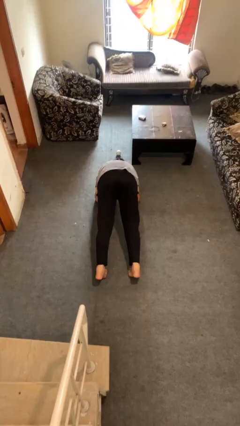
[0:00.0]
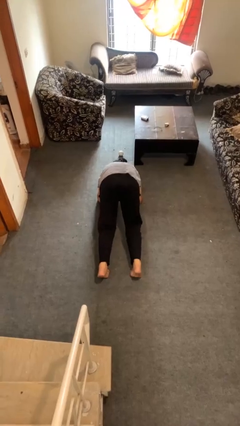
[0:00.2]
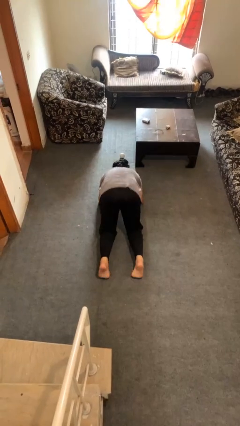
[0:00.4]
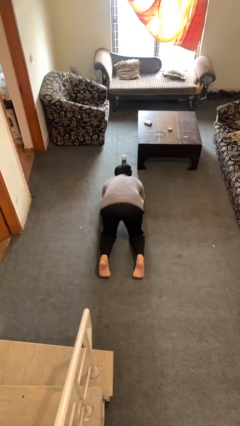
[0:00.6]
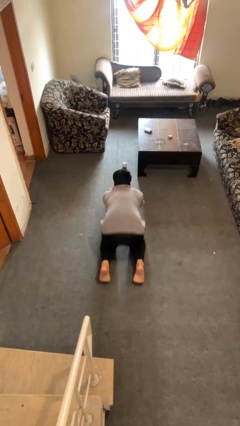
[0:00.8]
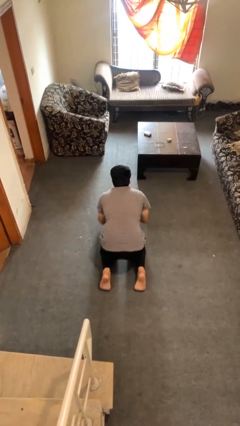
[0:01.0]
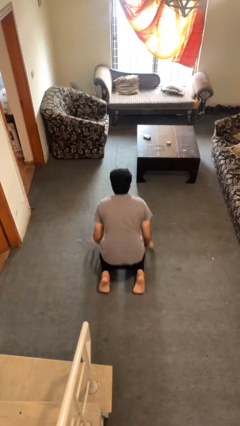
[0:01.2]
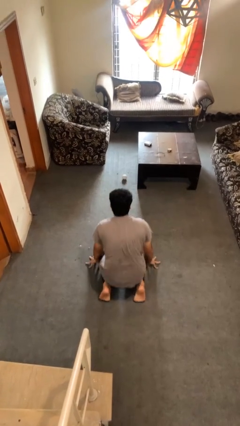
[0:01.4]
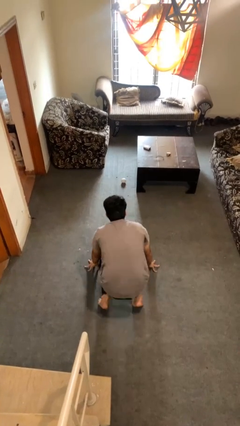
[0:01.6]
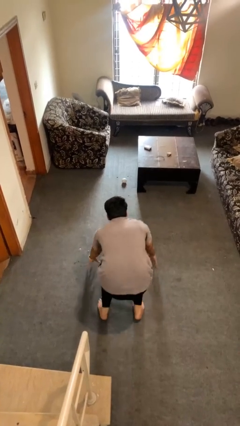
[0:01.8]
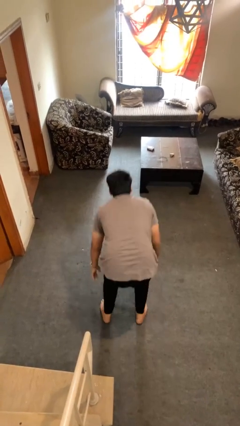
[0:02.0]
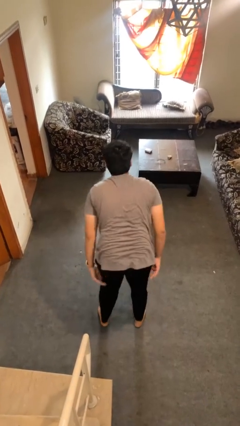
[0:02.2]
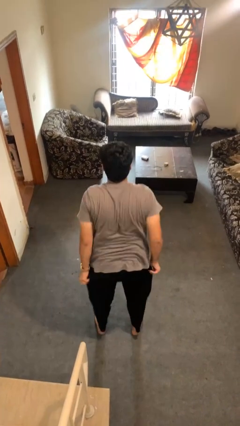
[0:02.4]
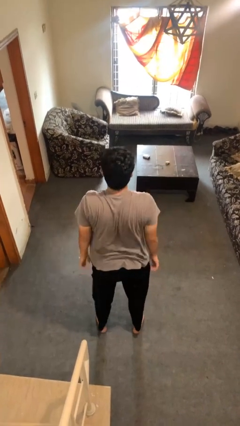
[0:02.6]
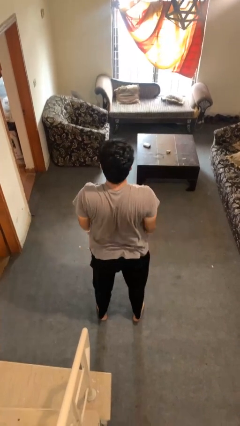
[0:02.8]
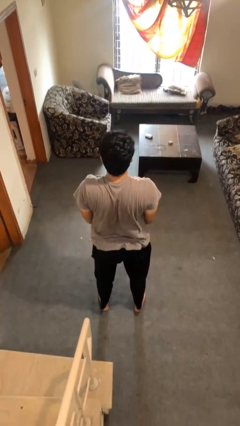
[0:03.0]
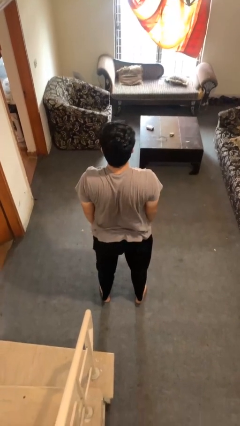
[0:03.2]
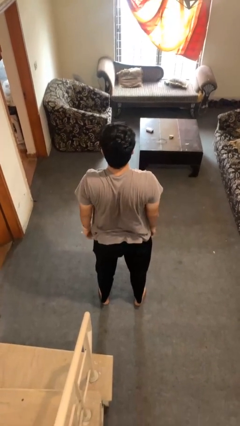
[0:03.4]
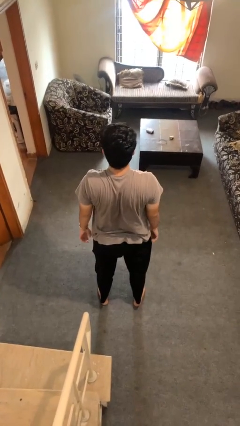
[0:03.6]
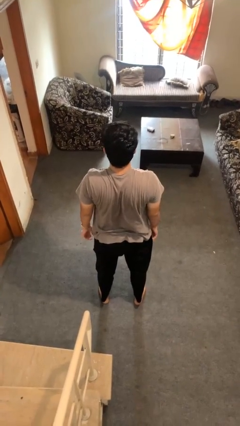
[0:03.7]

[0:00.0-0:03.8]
person stands up from floor

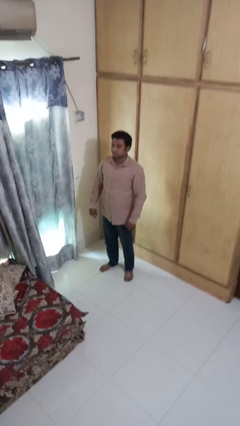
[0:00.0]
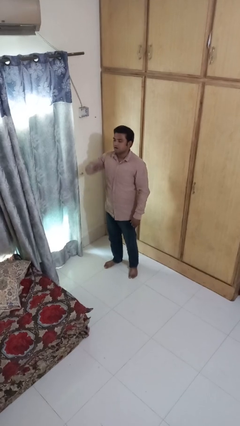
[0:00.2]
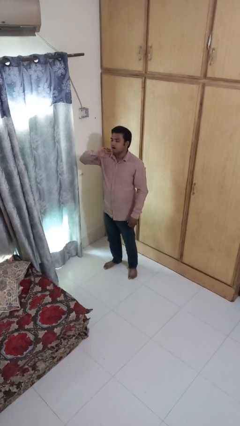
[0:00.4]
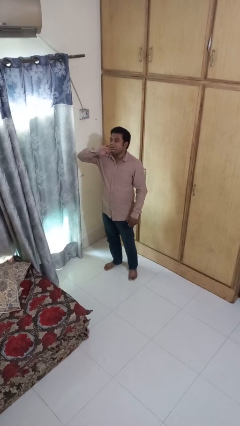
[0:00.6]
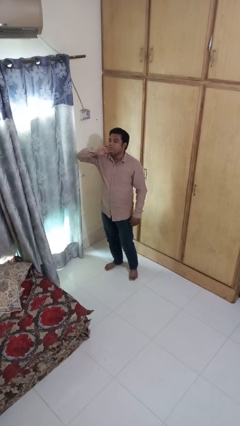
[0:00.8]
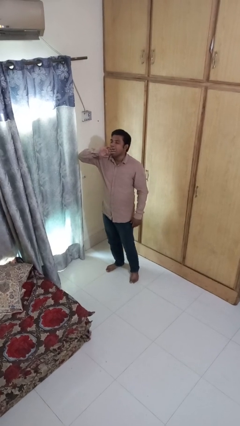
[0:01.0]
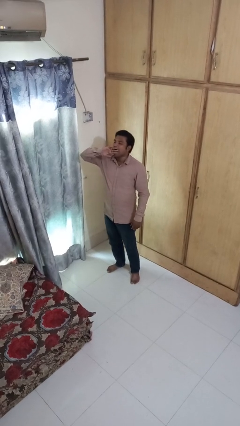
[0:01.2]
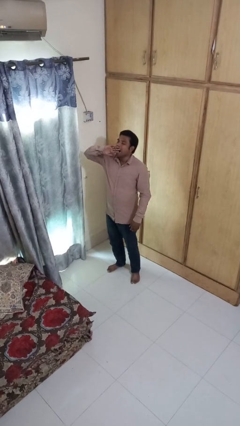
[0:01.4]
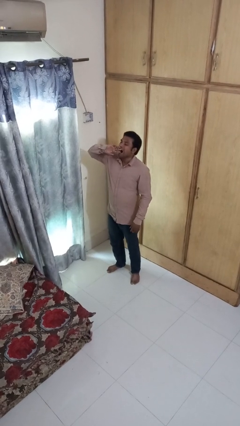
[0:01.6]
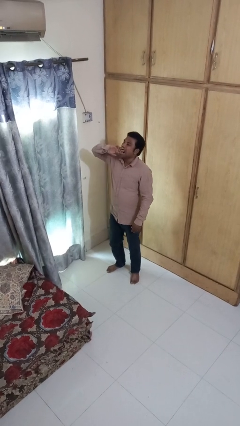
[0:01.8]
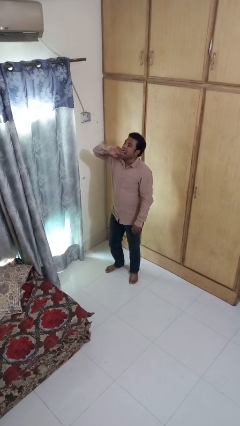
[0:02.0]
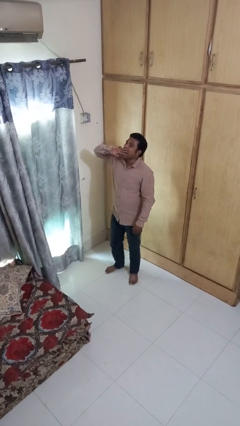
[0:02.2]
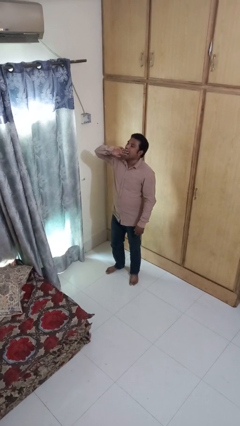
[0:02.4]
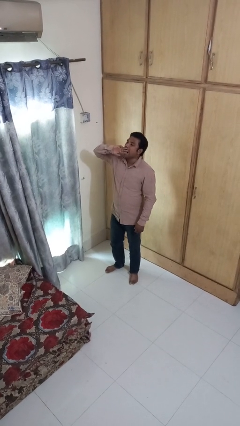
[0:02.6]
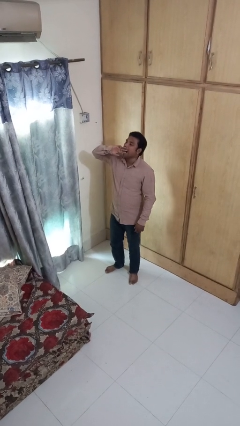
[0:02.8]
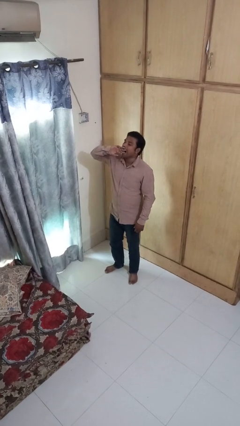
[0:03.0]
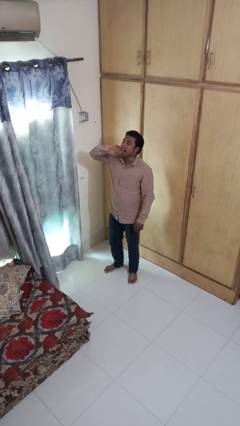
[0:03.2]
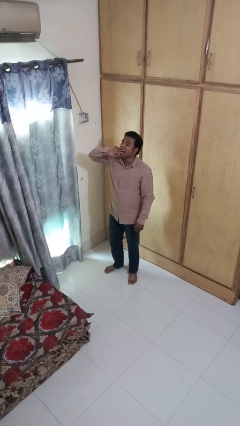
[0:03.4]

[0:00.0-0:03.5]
person yawns

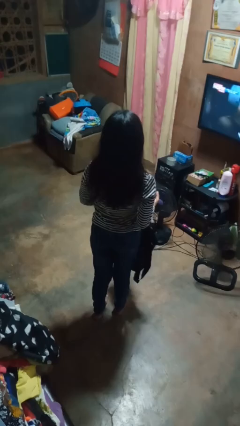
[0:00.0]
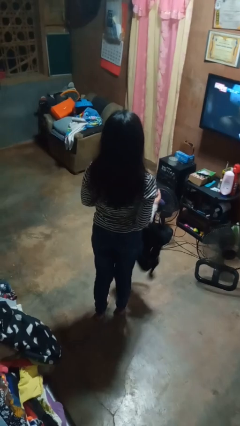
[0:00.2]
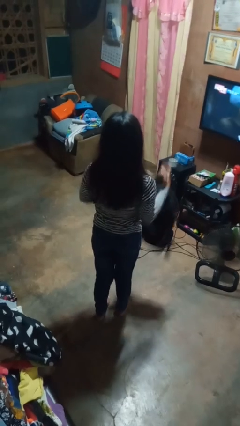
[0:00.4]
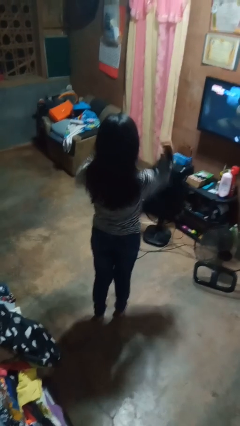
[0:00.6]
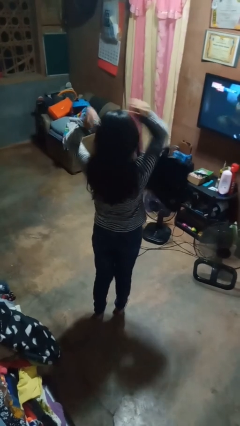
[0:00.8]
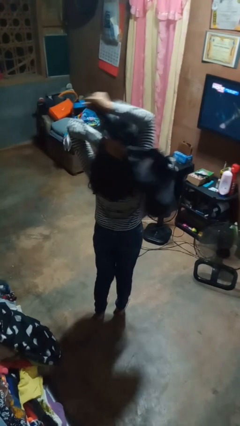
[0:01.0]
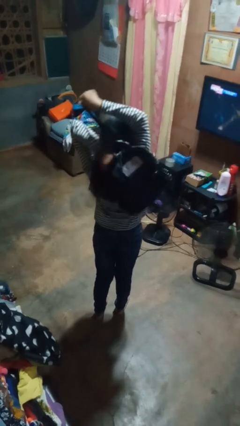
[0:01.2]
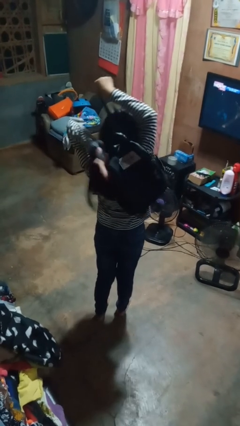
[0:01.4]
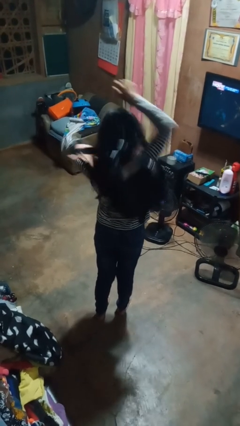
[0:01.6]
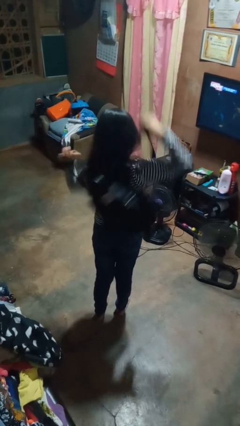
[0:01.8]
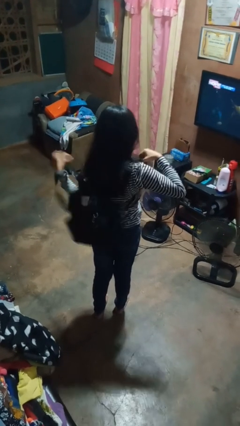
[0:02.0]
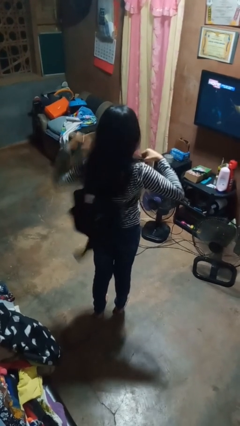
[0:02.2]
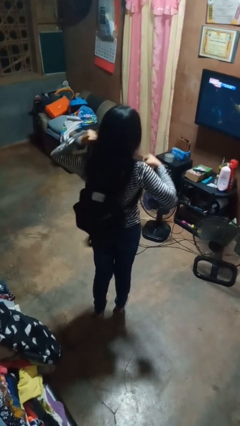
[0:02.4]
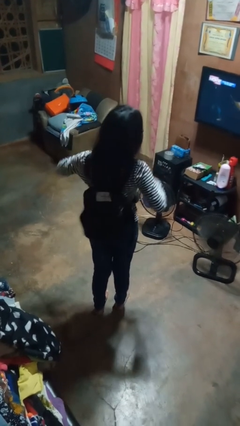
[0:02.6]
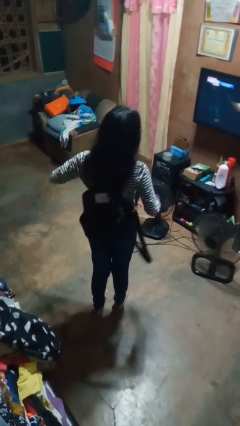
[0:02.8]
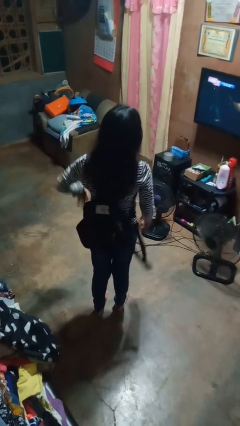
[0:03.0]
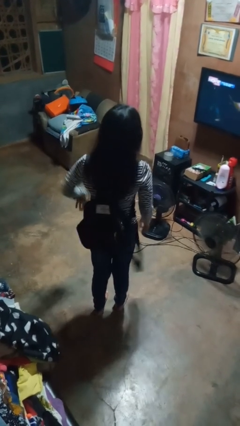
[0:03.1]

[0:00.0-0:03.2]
person puts on backpack

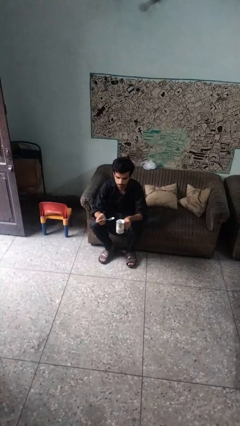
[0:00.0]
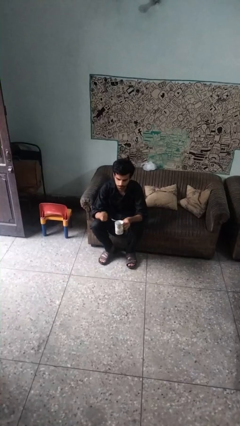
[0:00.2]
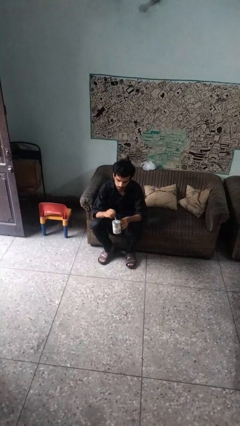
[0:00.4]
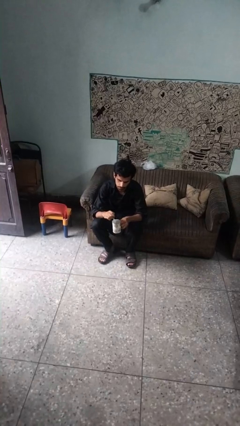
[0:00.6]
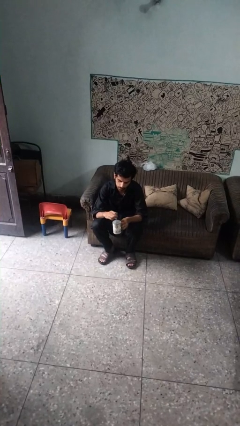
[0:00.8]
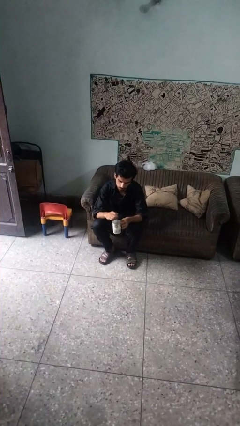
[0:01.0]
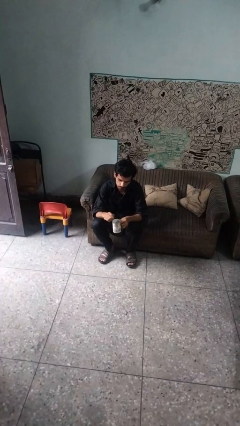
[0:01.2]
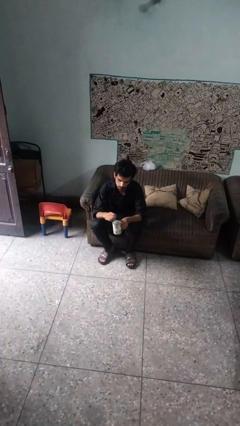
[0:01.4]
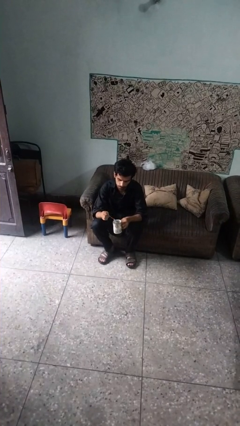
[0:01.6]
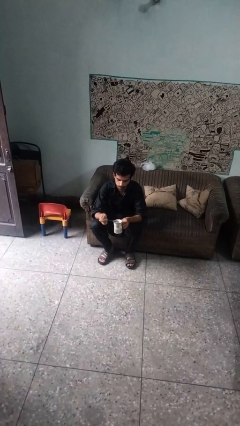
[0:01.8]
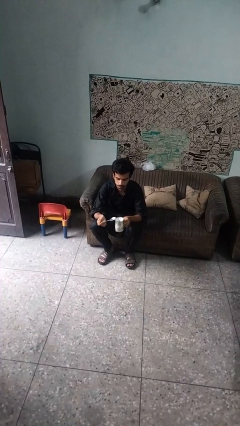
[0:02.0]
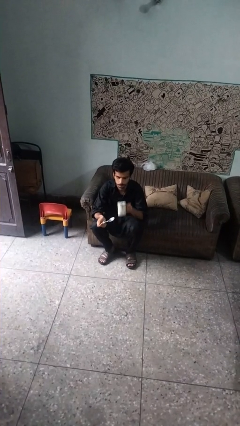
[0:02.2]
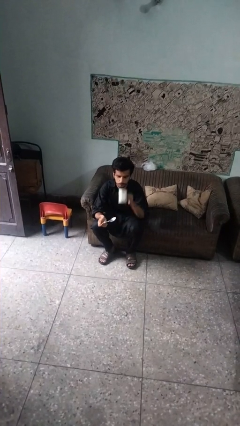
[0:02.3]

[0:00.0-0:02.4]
person stirs mug

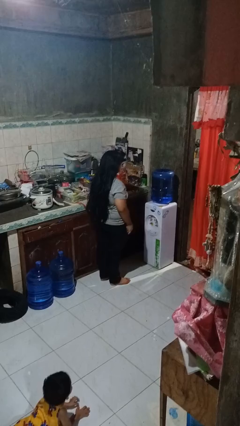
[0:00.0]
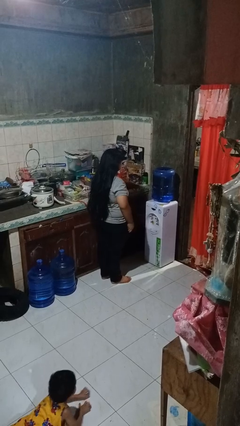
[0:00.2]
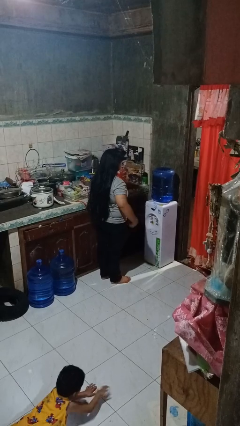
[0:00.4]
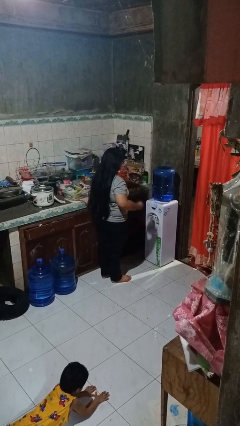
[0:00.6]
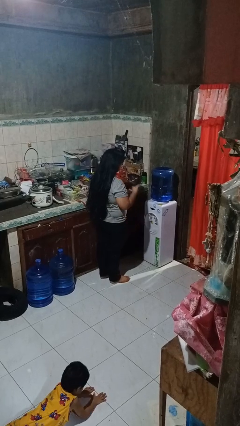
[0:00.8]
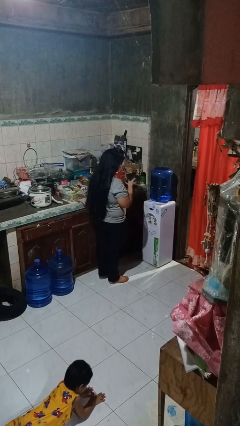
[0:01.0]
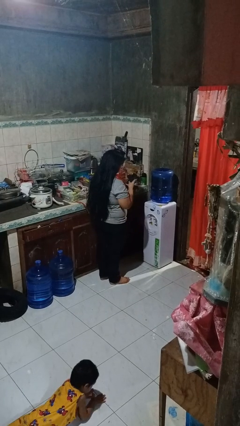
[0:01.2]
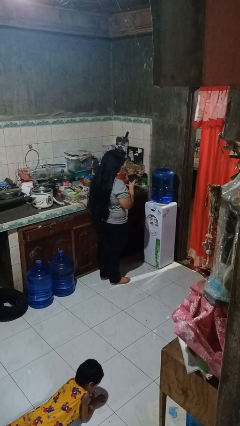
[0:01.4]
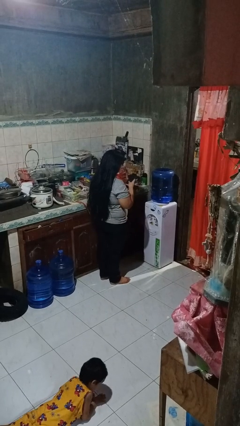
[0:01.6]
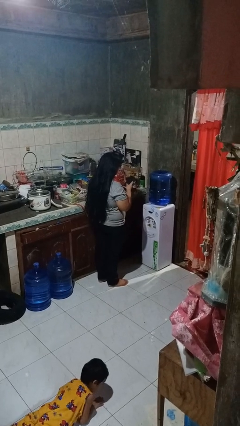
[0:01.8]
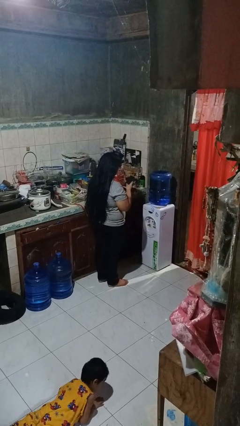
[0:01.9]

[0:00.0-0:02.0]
person takes phone from pocket

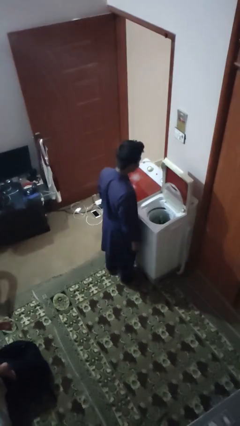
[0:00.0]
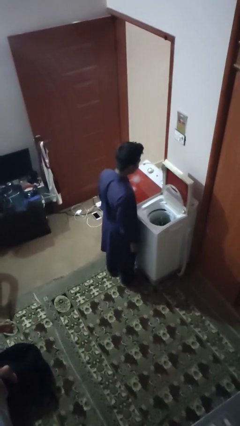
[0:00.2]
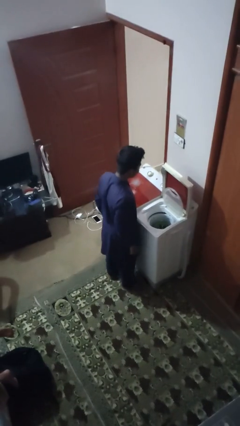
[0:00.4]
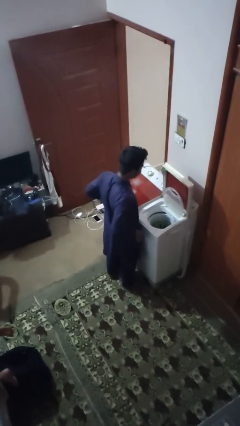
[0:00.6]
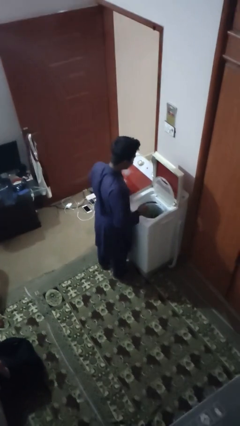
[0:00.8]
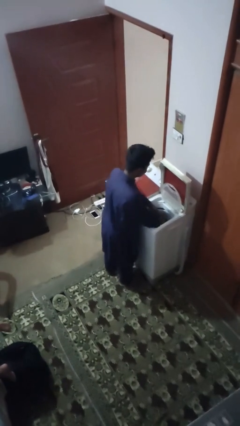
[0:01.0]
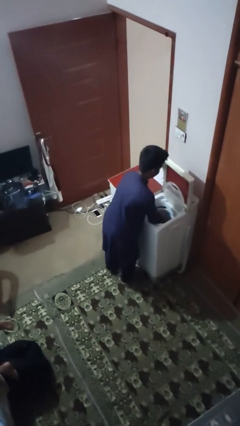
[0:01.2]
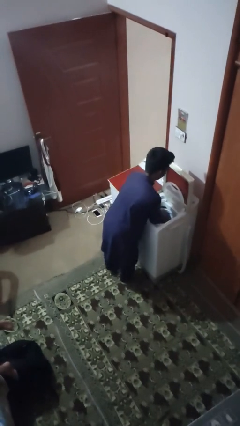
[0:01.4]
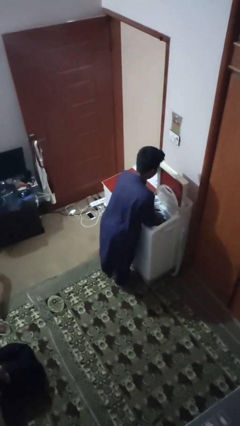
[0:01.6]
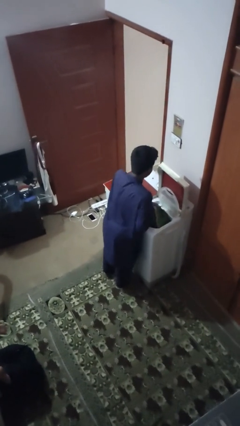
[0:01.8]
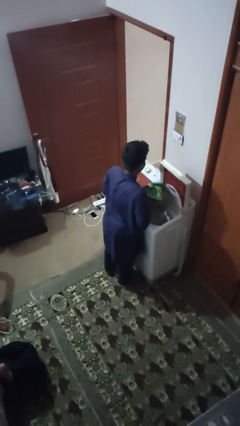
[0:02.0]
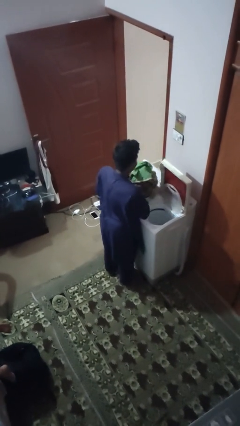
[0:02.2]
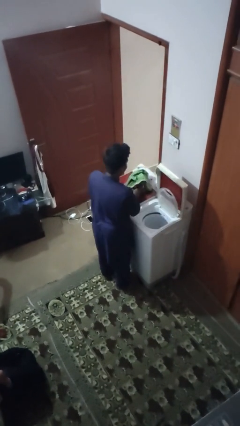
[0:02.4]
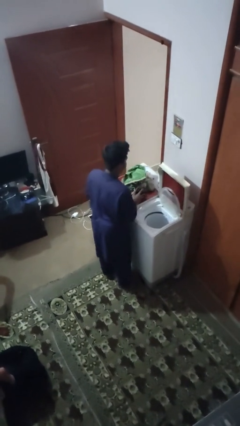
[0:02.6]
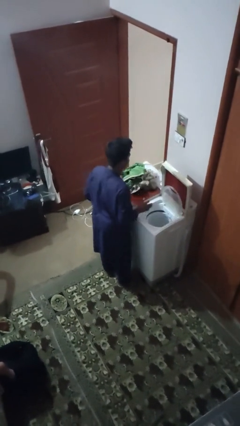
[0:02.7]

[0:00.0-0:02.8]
person unloads dryer
